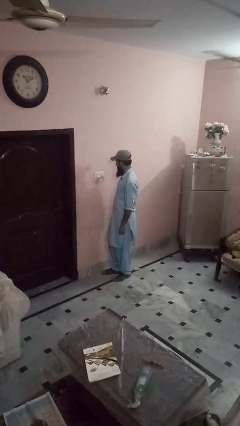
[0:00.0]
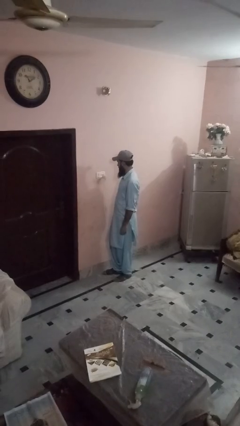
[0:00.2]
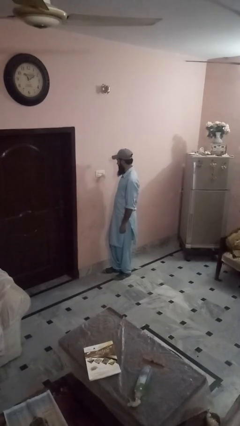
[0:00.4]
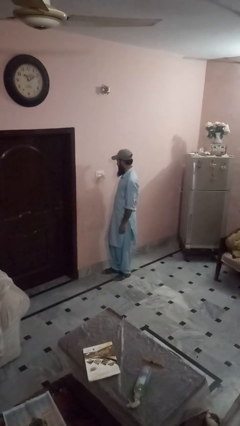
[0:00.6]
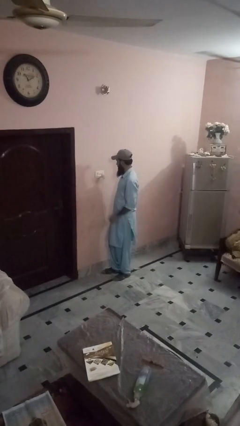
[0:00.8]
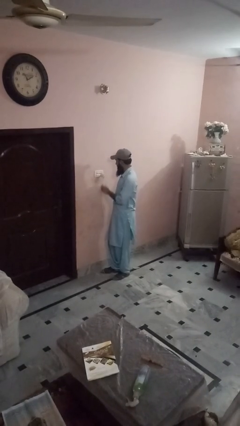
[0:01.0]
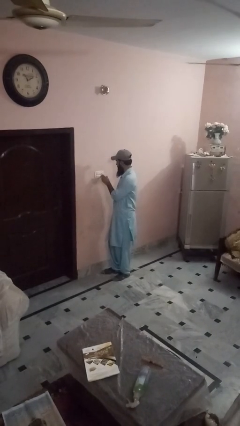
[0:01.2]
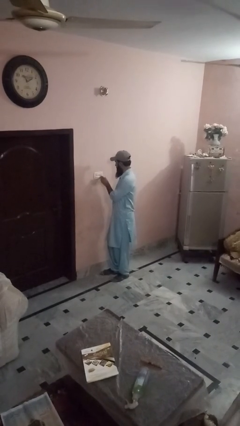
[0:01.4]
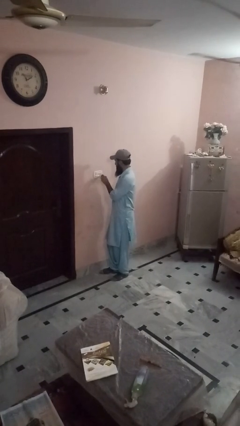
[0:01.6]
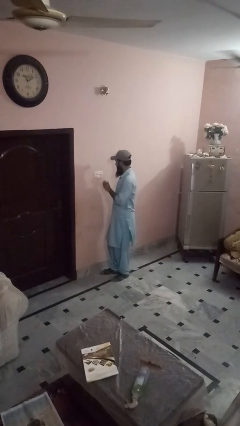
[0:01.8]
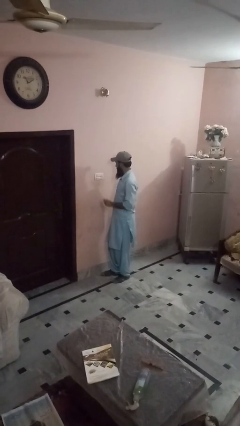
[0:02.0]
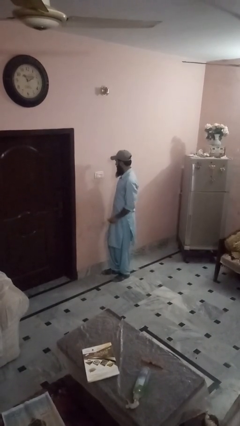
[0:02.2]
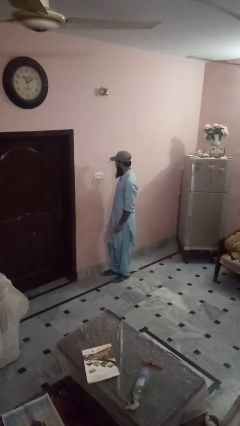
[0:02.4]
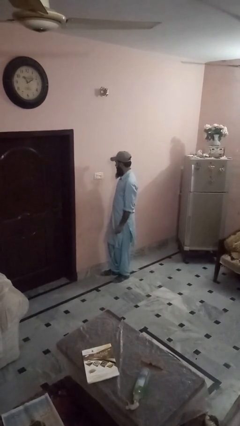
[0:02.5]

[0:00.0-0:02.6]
person unplugs from electrical socket

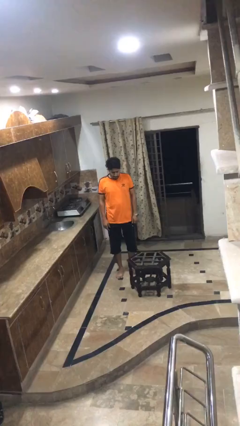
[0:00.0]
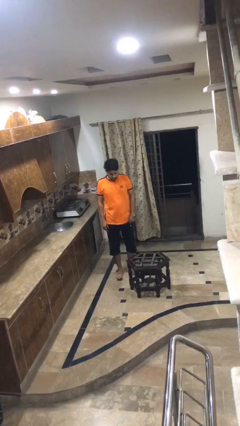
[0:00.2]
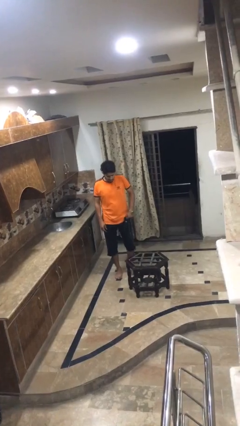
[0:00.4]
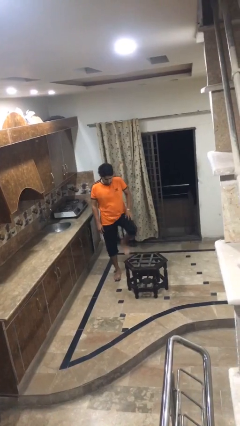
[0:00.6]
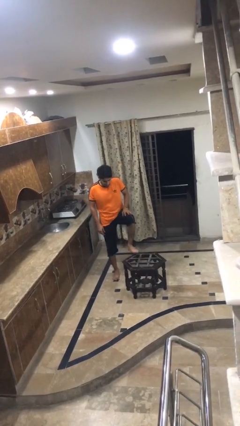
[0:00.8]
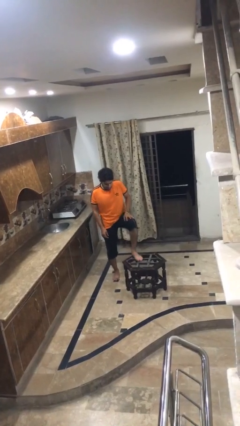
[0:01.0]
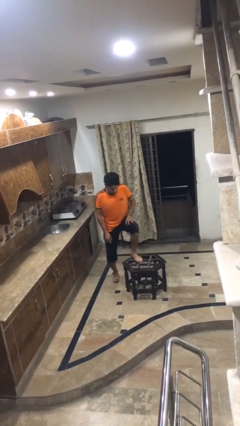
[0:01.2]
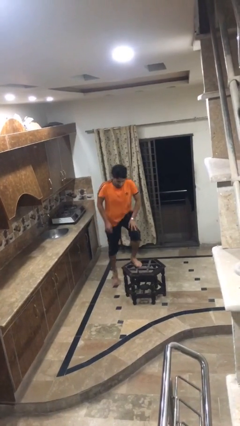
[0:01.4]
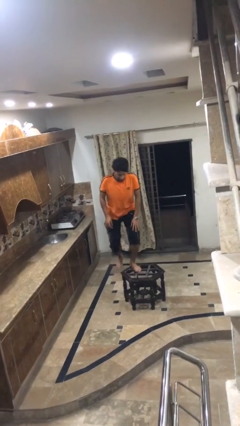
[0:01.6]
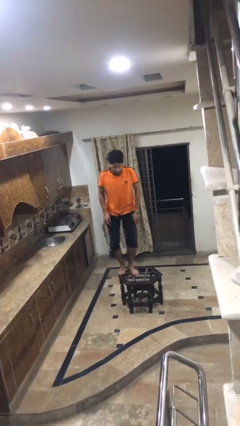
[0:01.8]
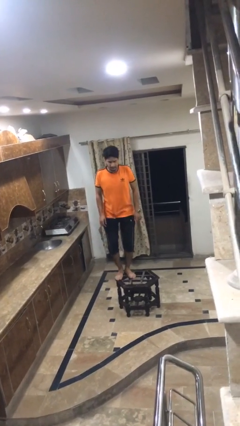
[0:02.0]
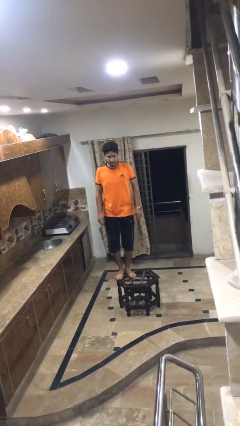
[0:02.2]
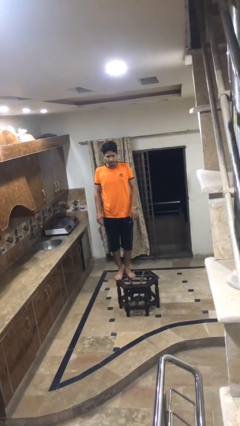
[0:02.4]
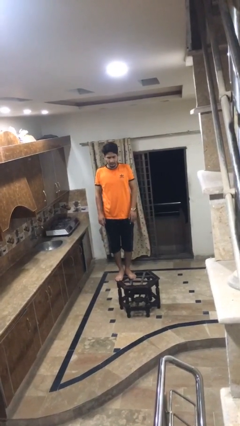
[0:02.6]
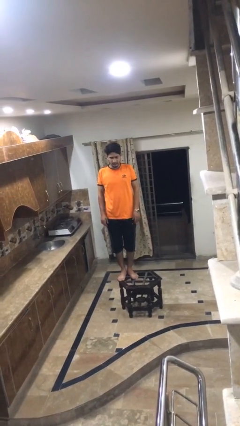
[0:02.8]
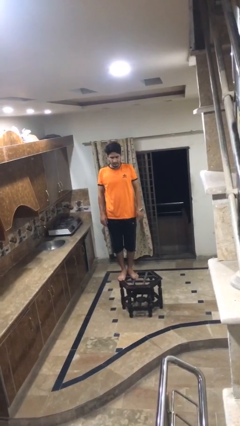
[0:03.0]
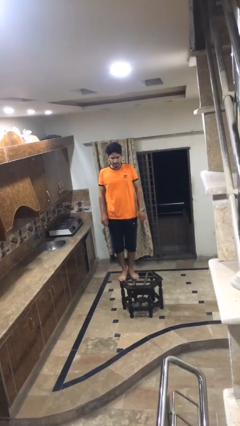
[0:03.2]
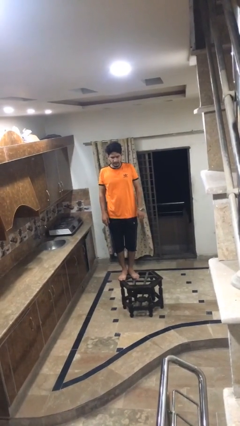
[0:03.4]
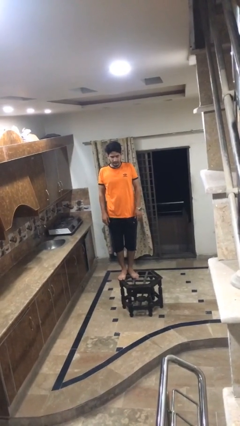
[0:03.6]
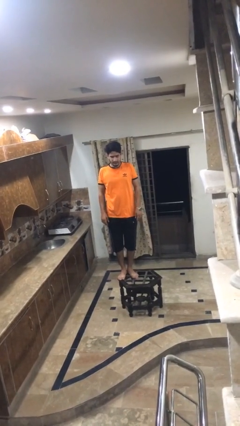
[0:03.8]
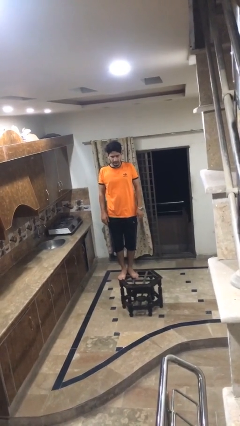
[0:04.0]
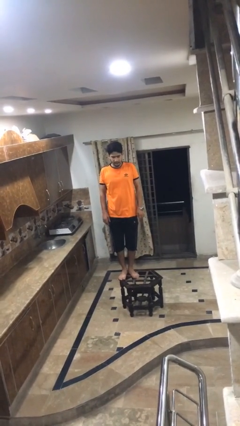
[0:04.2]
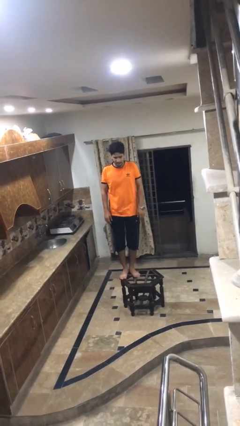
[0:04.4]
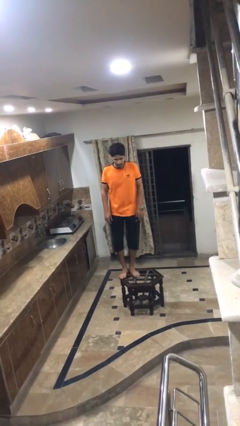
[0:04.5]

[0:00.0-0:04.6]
person climbs on table

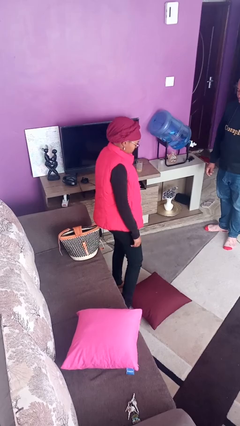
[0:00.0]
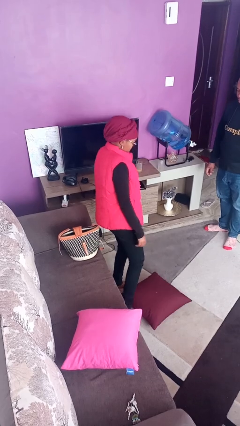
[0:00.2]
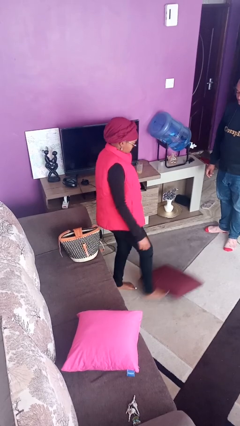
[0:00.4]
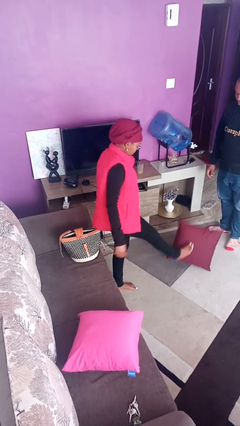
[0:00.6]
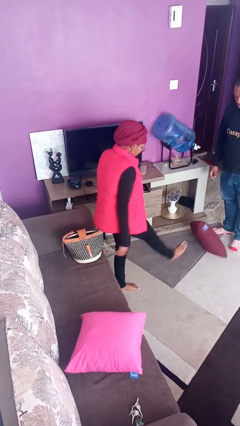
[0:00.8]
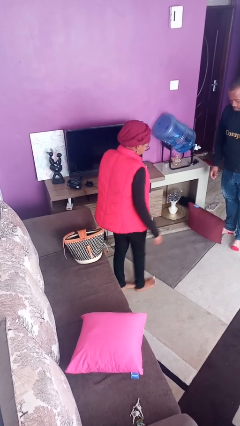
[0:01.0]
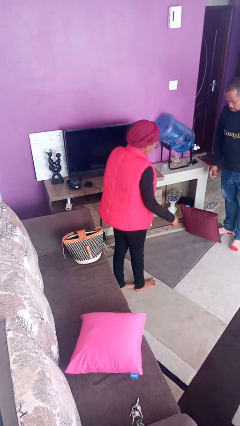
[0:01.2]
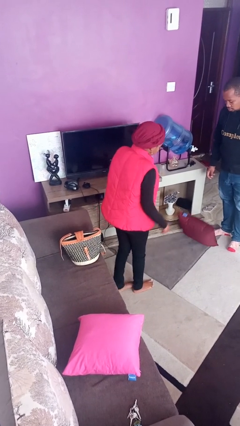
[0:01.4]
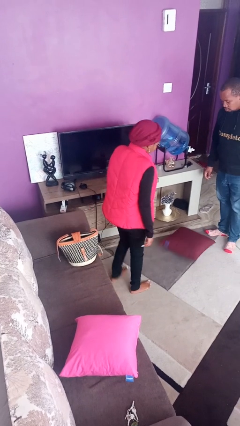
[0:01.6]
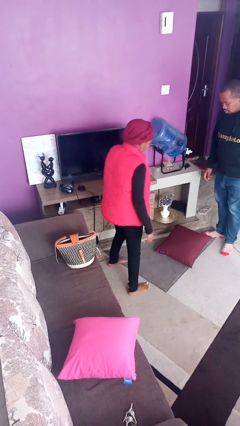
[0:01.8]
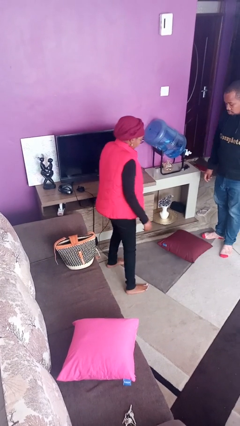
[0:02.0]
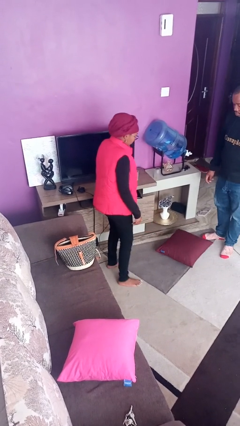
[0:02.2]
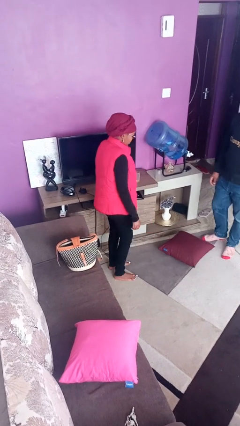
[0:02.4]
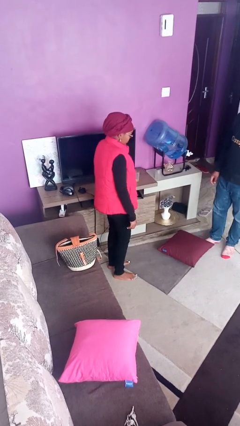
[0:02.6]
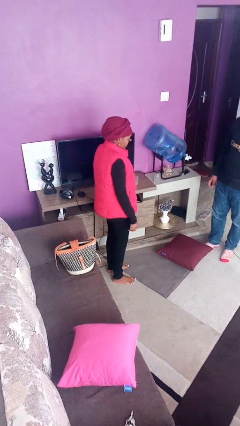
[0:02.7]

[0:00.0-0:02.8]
person kicks object to person

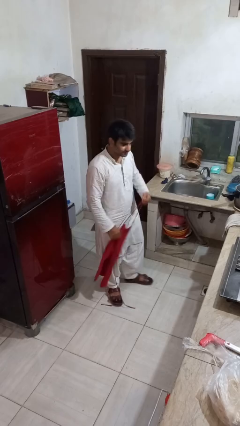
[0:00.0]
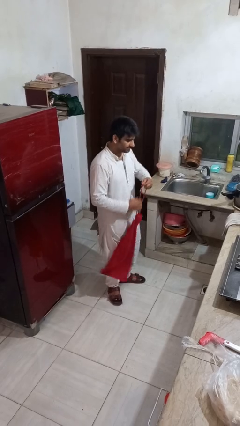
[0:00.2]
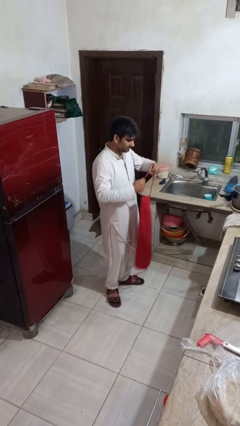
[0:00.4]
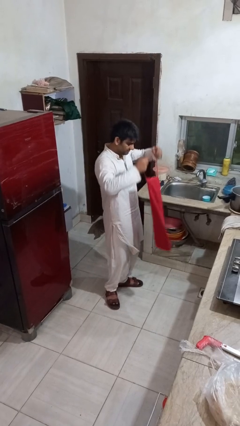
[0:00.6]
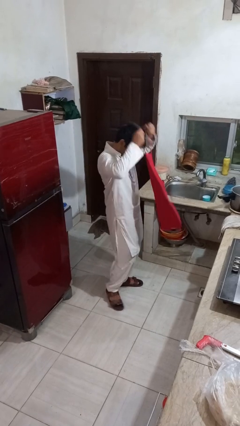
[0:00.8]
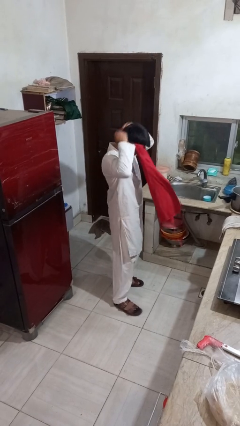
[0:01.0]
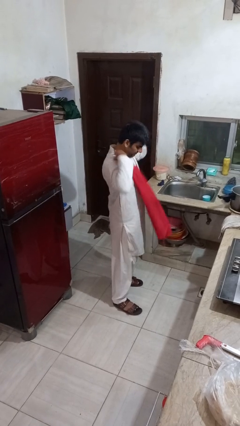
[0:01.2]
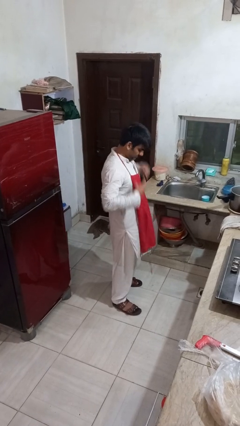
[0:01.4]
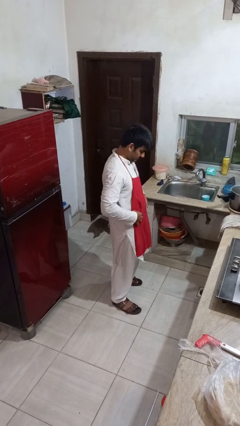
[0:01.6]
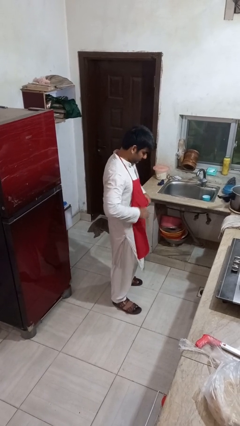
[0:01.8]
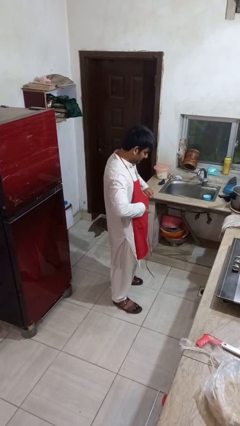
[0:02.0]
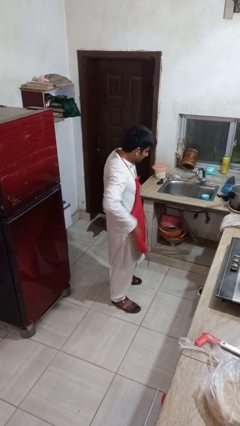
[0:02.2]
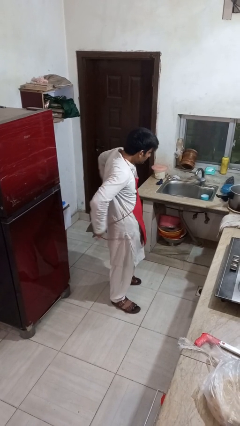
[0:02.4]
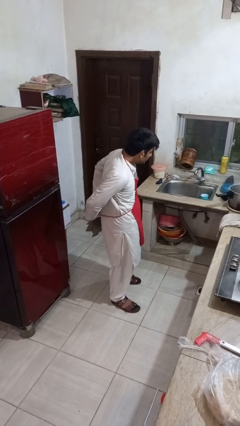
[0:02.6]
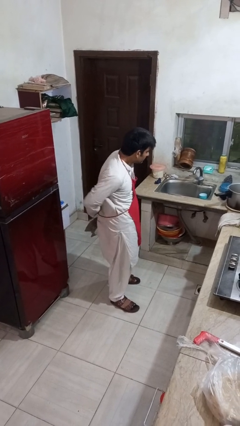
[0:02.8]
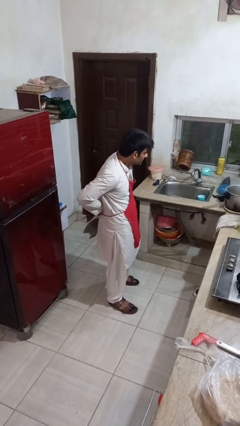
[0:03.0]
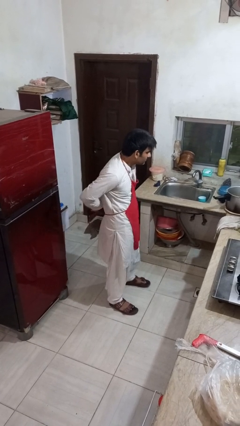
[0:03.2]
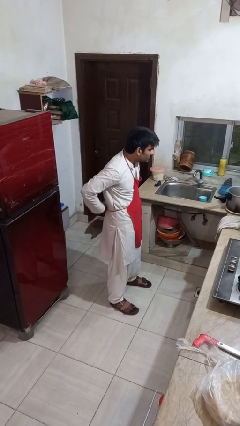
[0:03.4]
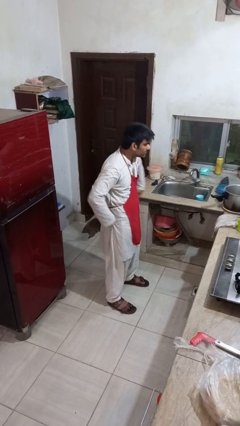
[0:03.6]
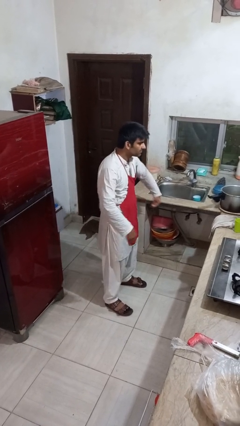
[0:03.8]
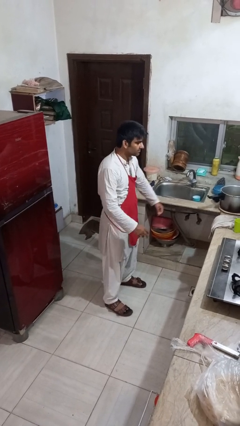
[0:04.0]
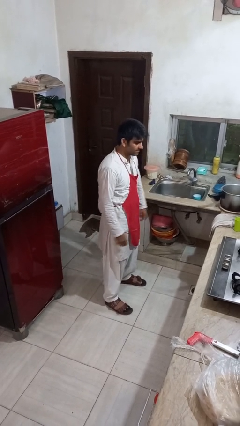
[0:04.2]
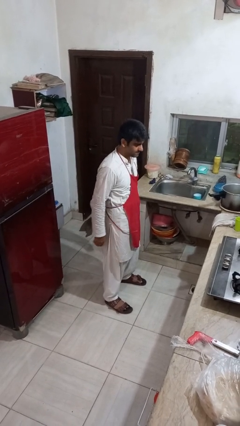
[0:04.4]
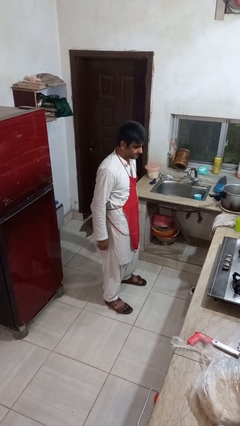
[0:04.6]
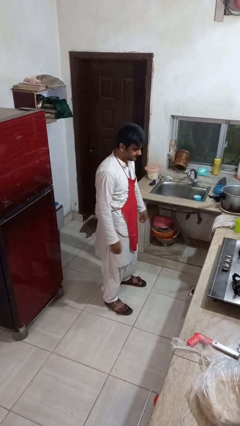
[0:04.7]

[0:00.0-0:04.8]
person puts on apron

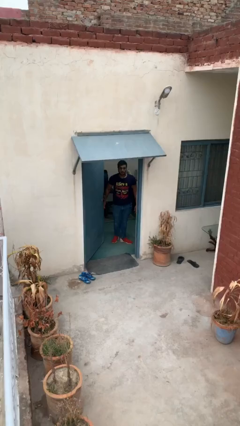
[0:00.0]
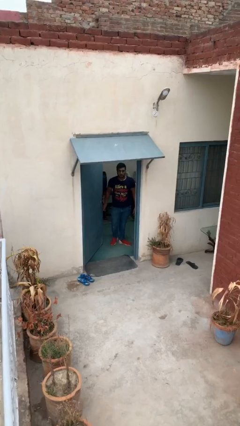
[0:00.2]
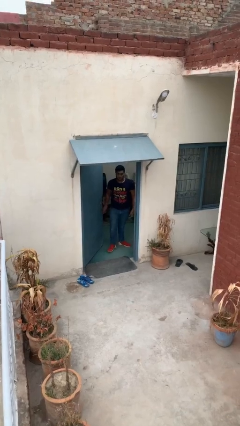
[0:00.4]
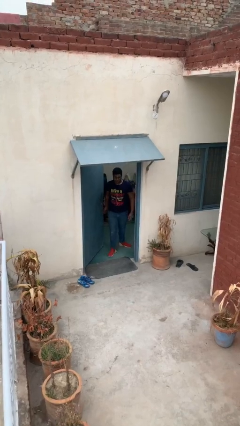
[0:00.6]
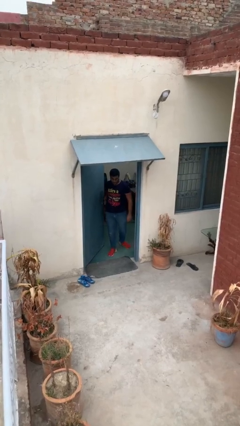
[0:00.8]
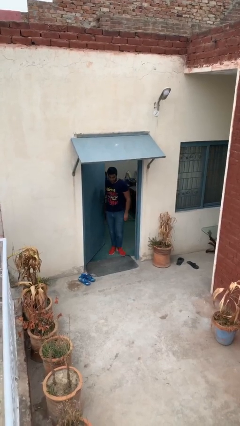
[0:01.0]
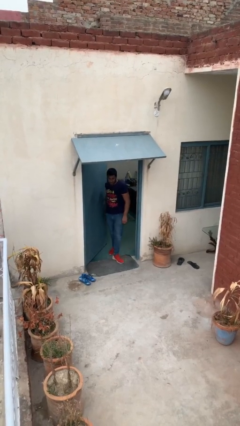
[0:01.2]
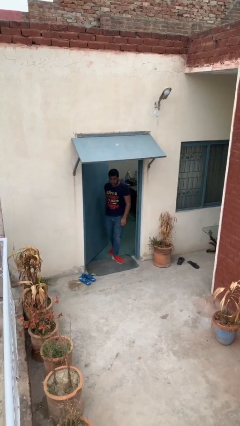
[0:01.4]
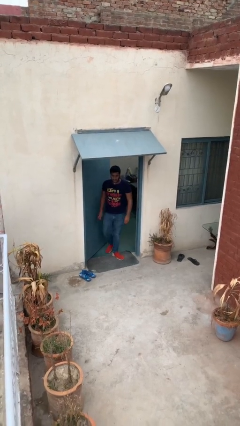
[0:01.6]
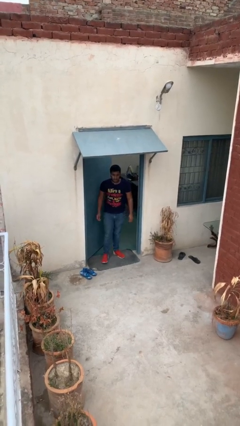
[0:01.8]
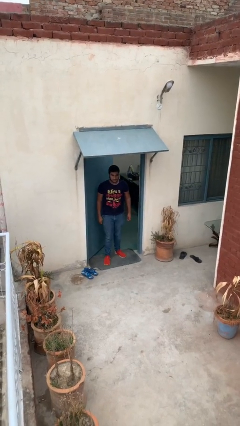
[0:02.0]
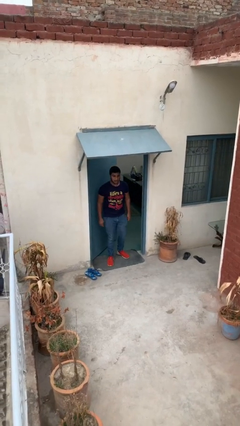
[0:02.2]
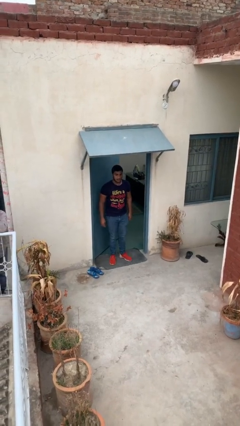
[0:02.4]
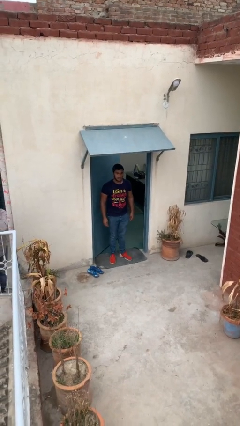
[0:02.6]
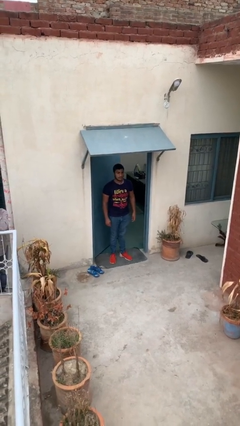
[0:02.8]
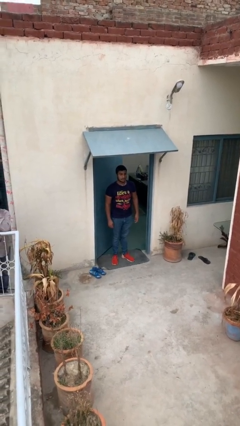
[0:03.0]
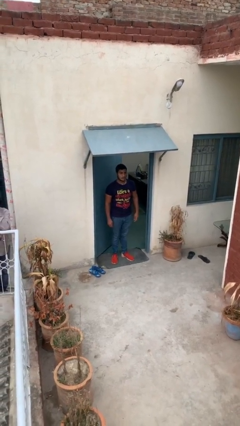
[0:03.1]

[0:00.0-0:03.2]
person enters scene through structure
